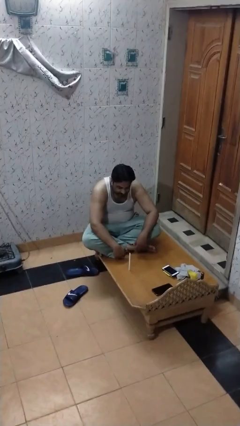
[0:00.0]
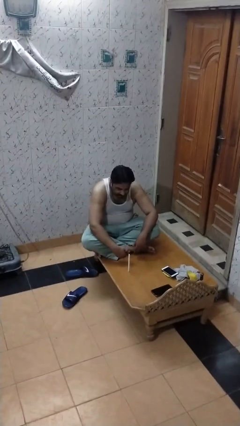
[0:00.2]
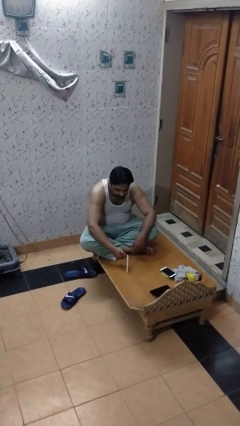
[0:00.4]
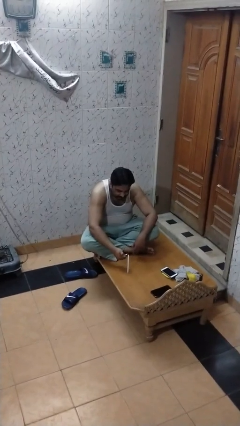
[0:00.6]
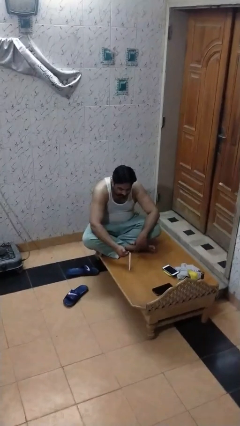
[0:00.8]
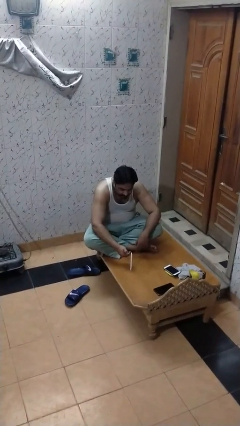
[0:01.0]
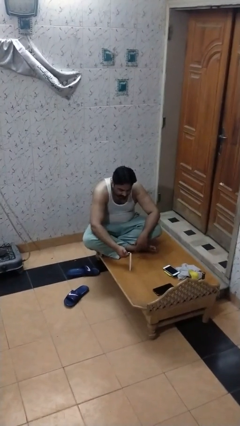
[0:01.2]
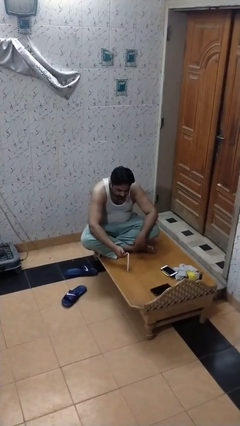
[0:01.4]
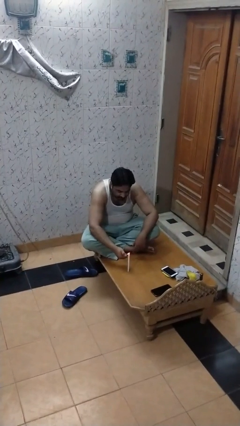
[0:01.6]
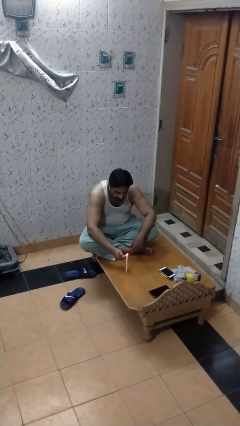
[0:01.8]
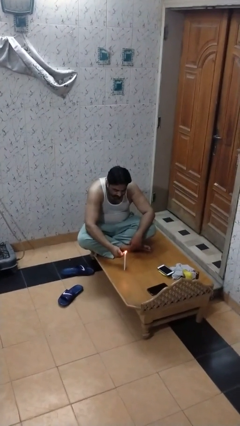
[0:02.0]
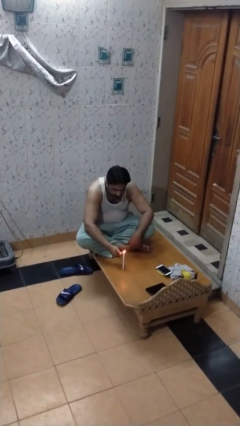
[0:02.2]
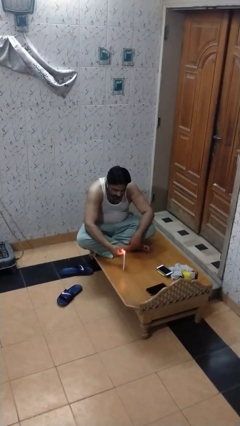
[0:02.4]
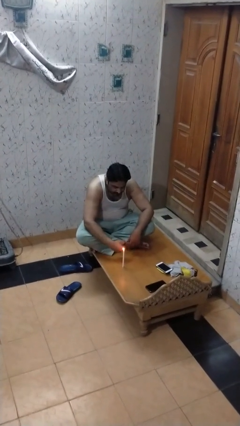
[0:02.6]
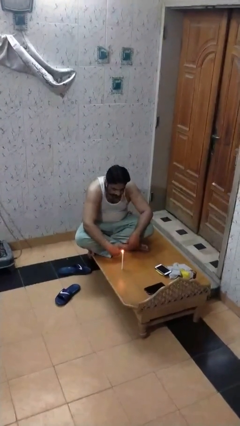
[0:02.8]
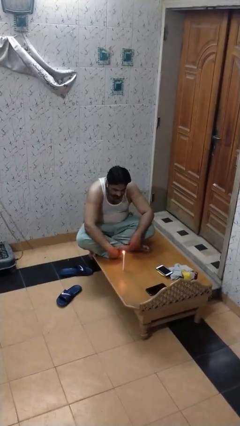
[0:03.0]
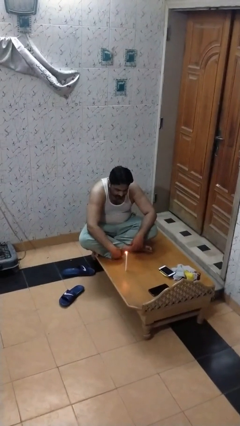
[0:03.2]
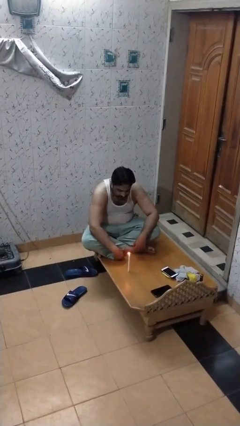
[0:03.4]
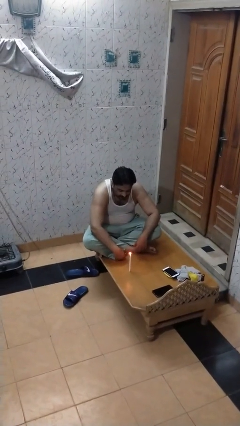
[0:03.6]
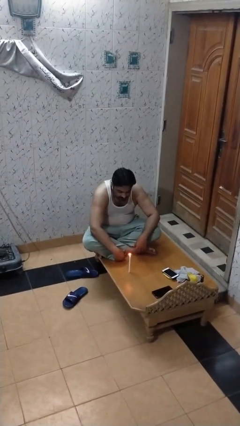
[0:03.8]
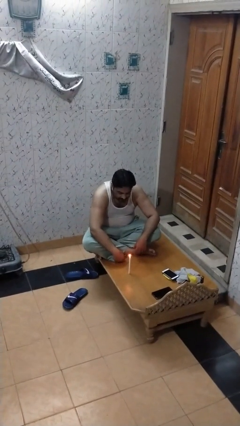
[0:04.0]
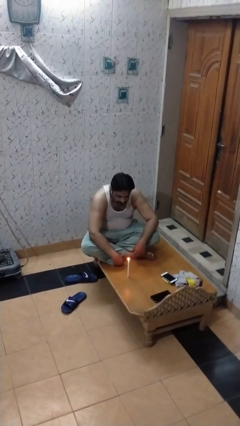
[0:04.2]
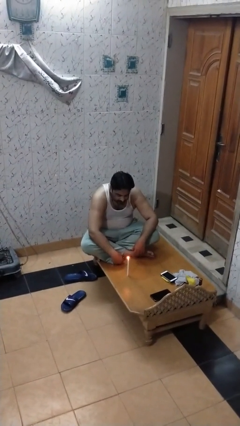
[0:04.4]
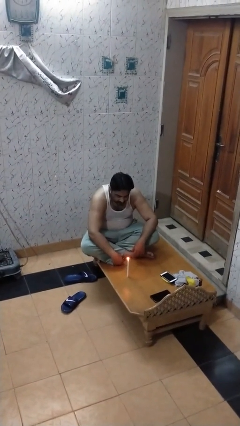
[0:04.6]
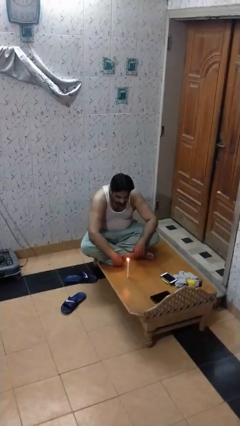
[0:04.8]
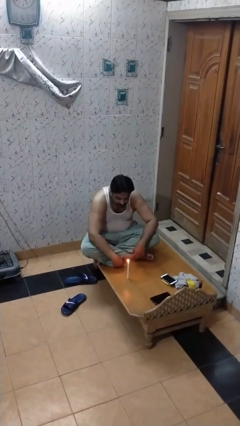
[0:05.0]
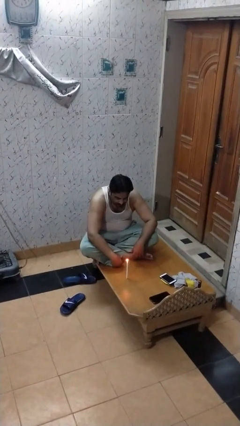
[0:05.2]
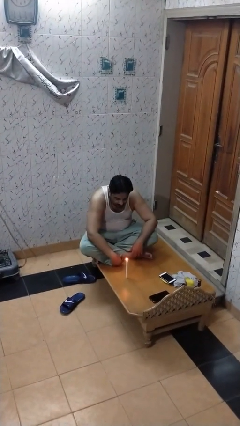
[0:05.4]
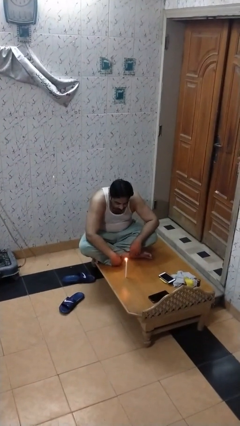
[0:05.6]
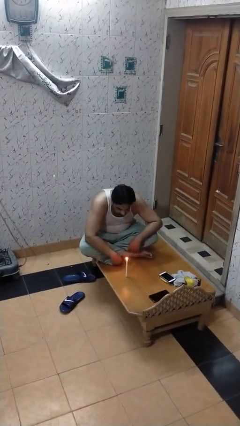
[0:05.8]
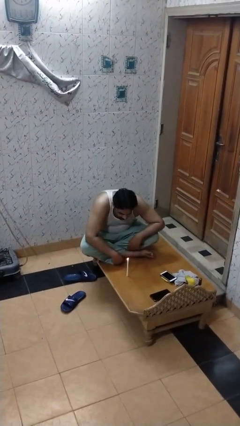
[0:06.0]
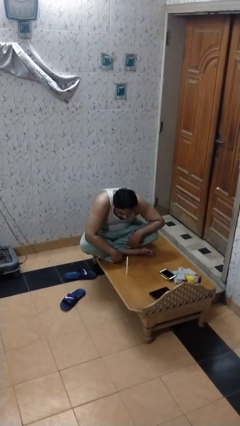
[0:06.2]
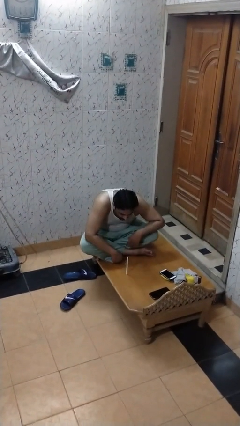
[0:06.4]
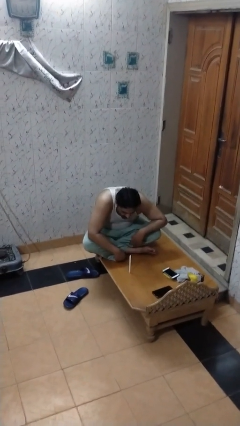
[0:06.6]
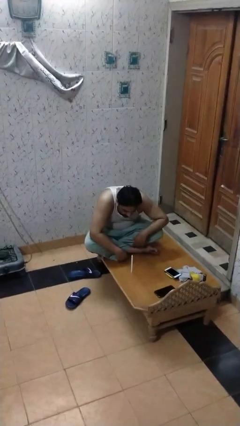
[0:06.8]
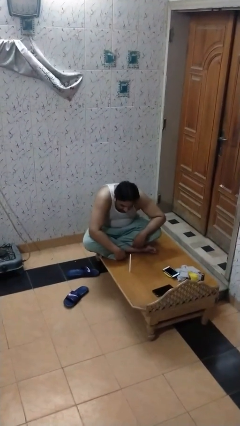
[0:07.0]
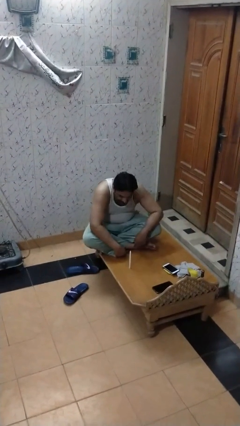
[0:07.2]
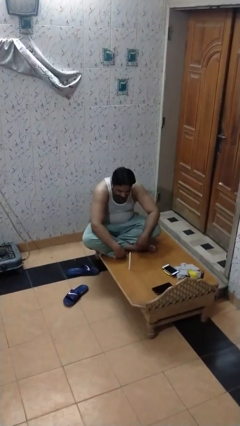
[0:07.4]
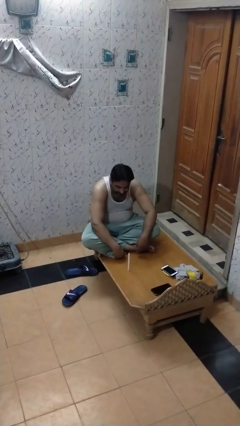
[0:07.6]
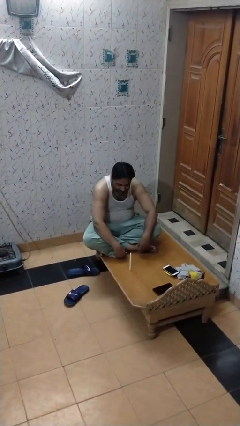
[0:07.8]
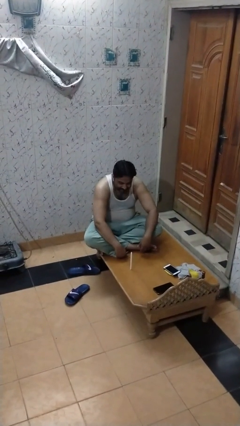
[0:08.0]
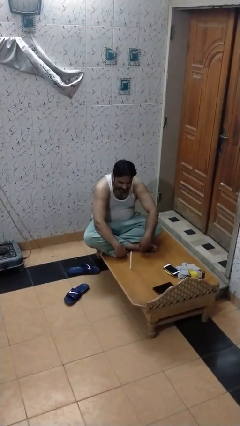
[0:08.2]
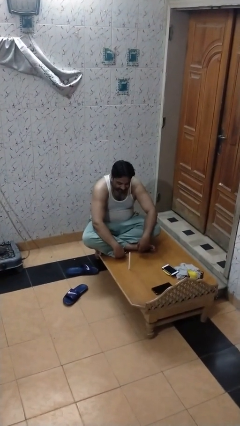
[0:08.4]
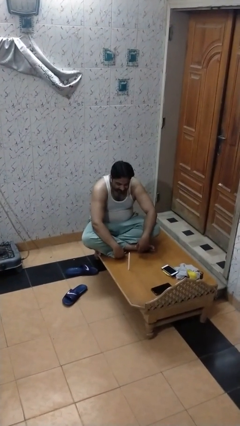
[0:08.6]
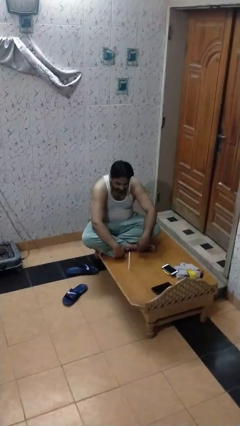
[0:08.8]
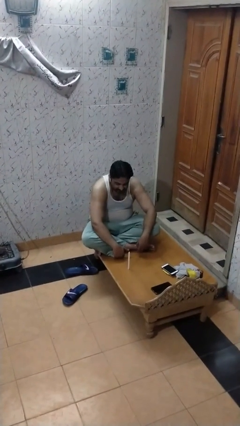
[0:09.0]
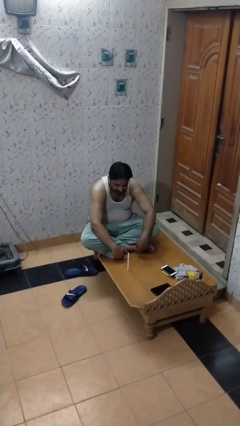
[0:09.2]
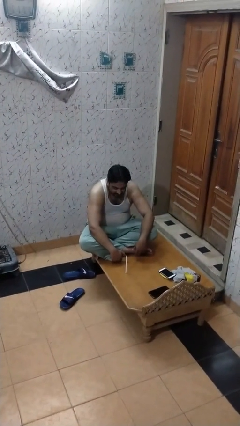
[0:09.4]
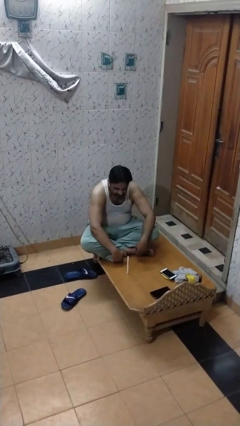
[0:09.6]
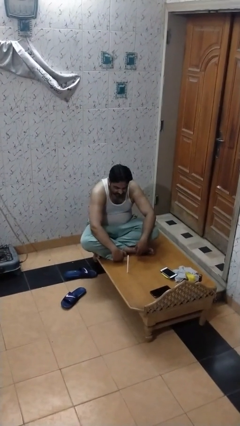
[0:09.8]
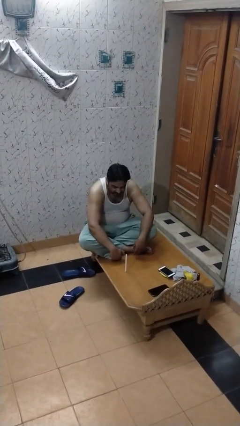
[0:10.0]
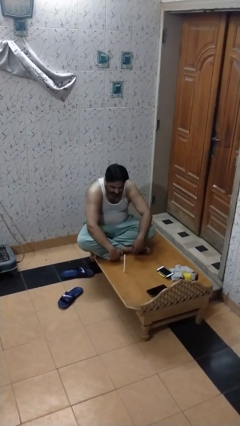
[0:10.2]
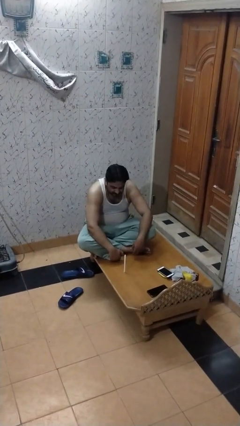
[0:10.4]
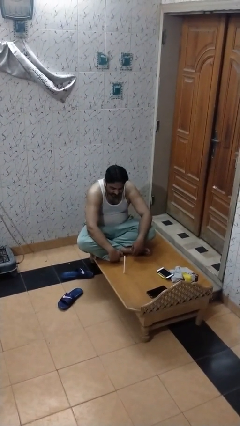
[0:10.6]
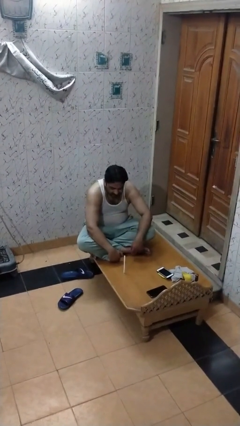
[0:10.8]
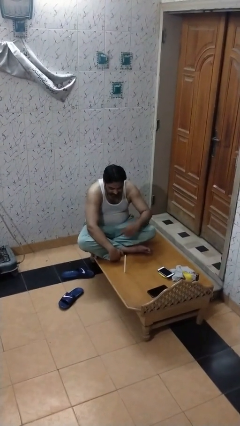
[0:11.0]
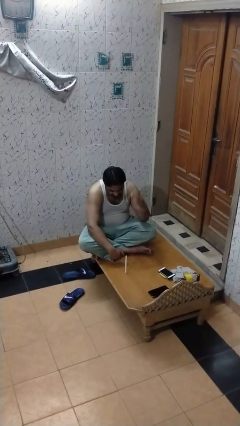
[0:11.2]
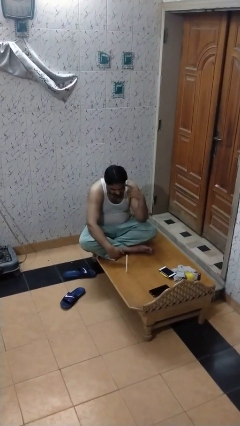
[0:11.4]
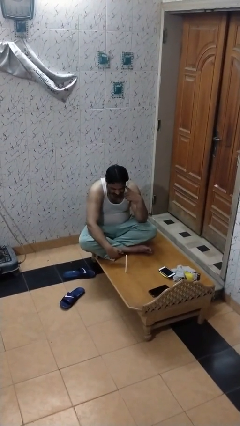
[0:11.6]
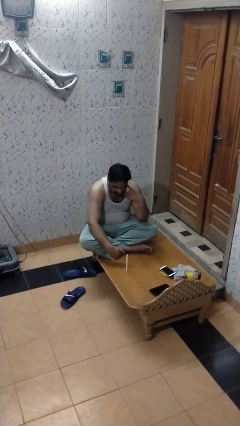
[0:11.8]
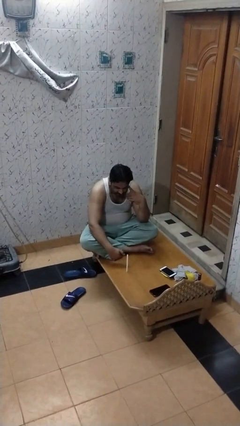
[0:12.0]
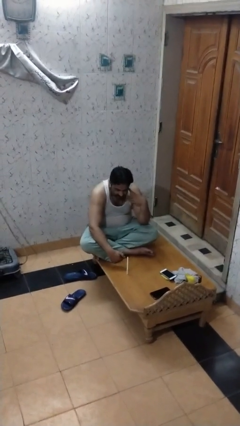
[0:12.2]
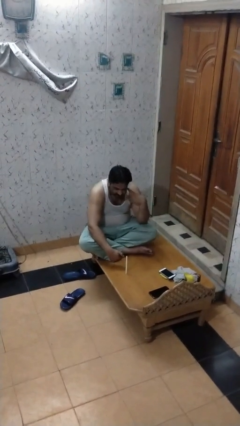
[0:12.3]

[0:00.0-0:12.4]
person lights candle

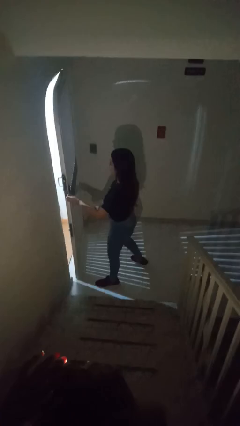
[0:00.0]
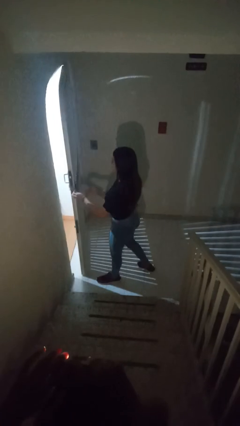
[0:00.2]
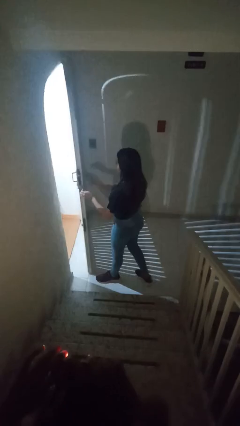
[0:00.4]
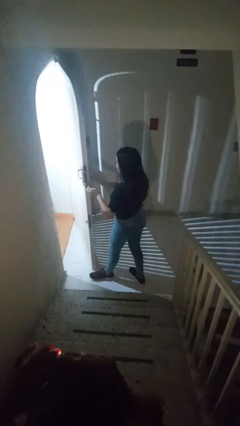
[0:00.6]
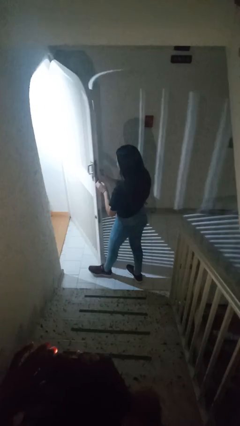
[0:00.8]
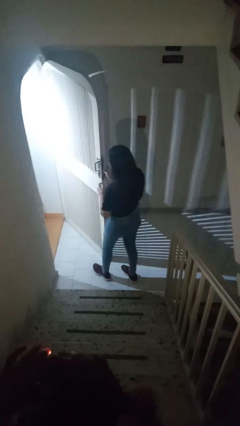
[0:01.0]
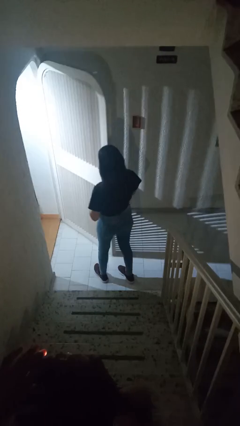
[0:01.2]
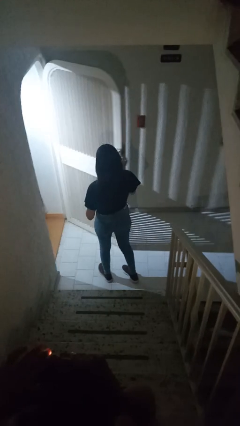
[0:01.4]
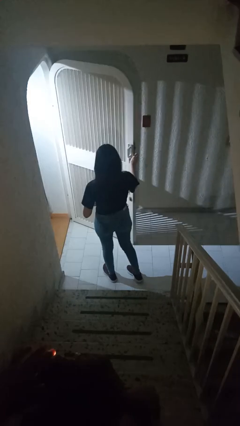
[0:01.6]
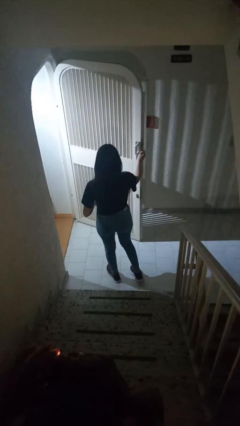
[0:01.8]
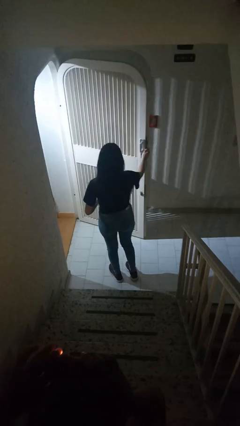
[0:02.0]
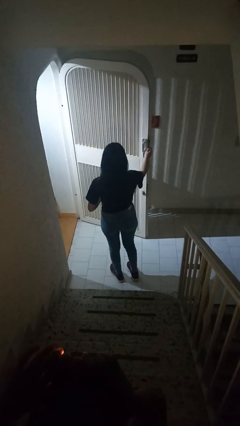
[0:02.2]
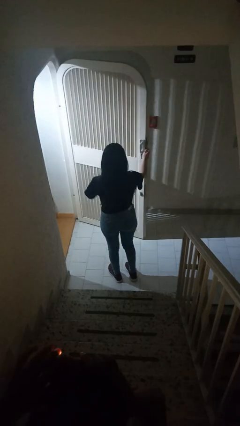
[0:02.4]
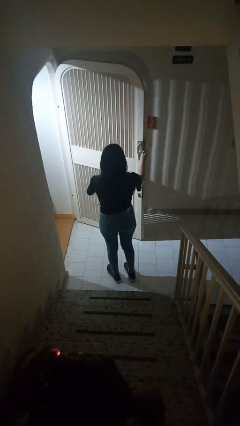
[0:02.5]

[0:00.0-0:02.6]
person opens facility door

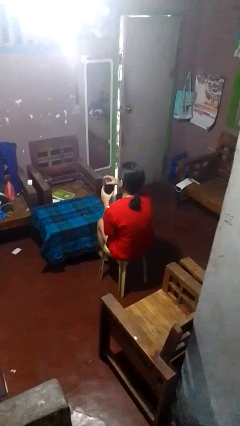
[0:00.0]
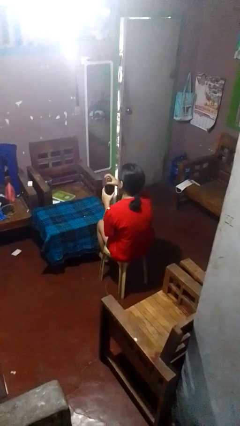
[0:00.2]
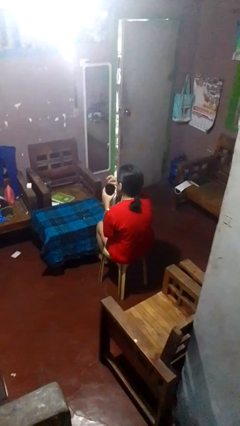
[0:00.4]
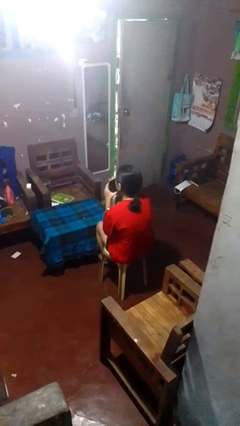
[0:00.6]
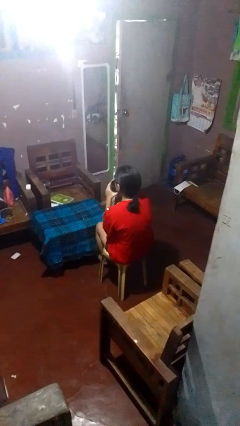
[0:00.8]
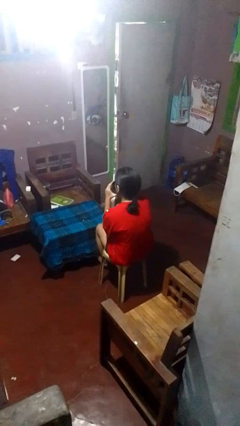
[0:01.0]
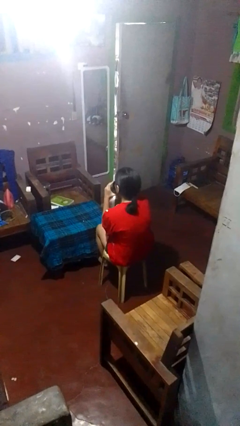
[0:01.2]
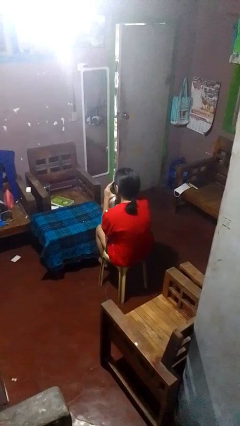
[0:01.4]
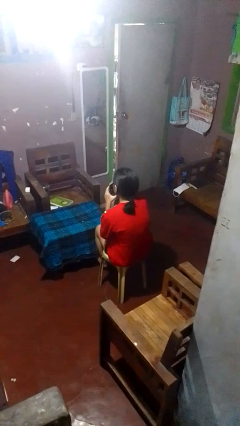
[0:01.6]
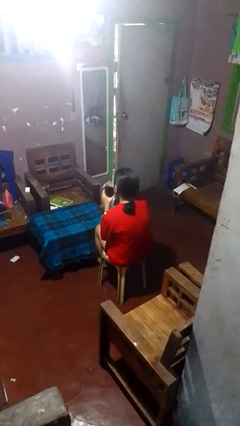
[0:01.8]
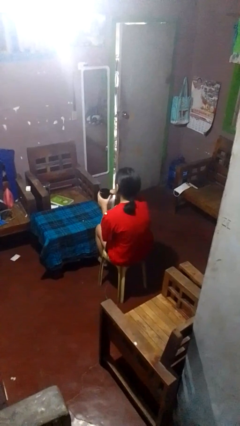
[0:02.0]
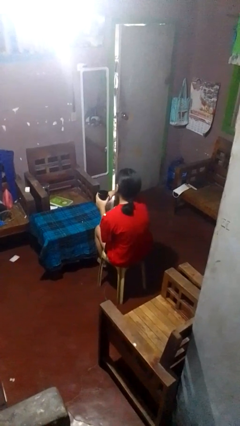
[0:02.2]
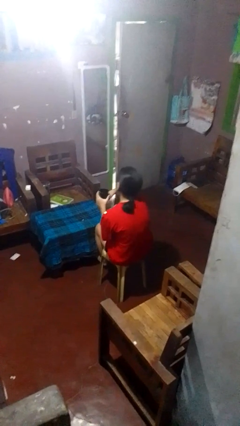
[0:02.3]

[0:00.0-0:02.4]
person drinks from mug

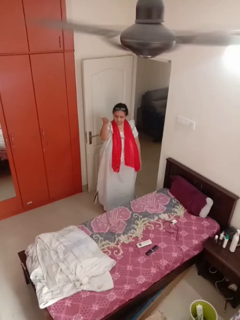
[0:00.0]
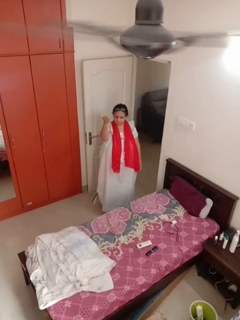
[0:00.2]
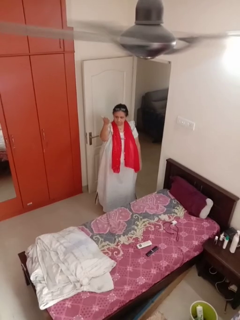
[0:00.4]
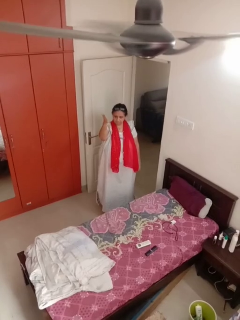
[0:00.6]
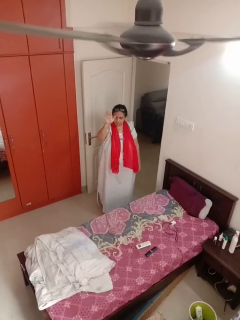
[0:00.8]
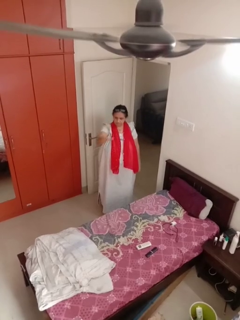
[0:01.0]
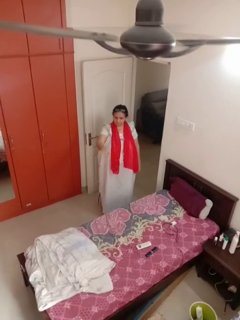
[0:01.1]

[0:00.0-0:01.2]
person gestures swipe up

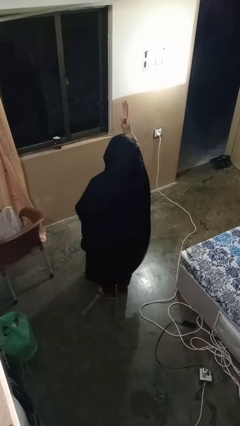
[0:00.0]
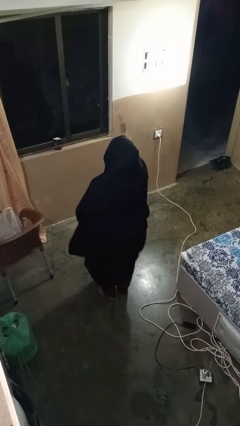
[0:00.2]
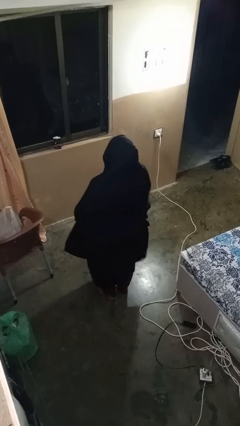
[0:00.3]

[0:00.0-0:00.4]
person gestures lower hand
